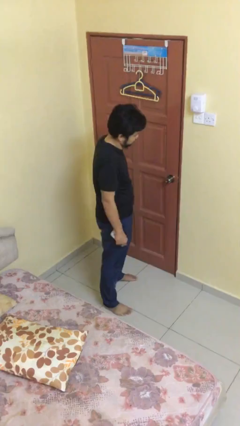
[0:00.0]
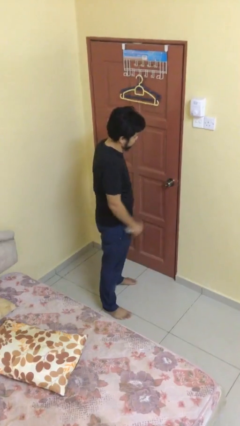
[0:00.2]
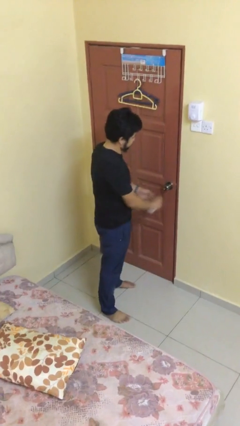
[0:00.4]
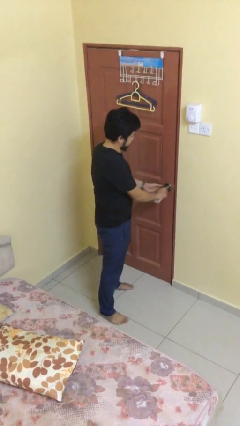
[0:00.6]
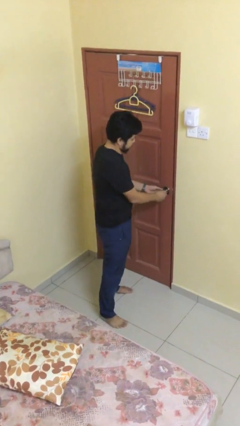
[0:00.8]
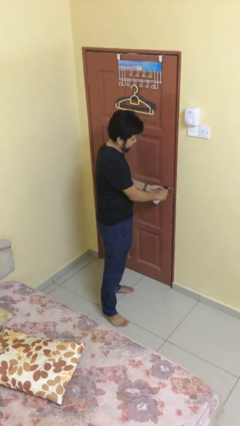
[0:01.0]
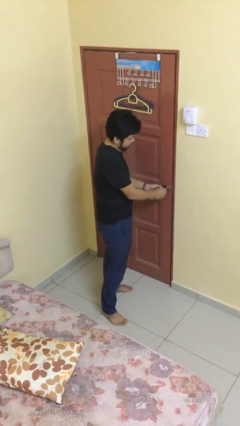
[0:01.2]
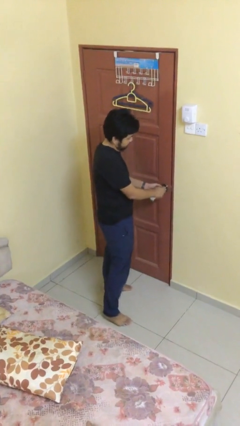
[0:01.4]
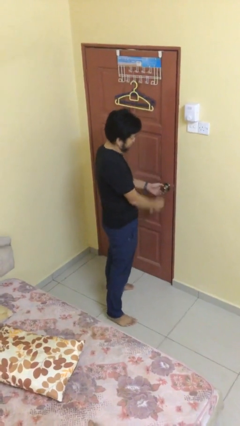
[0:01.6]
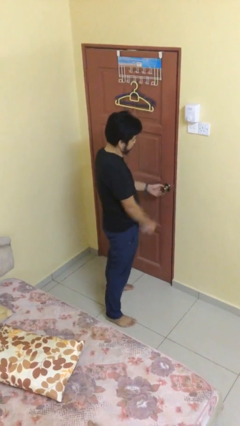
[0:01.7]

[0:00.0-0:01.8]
person unlocks door with keys

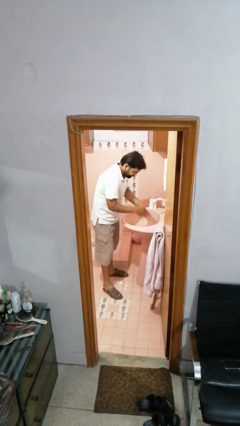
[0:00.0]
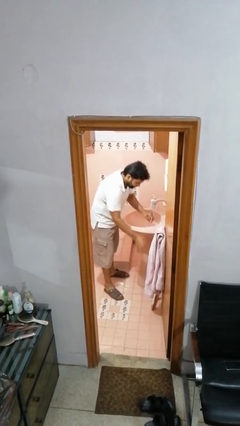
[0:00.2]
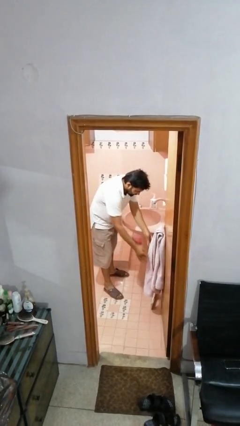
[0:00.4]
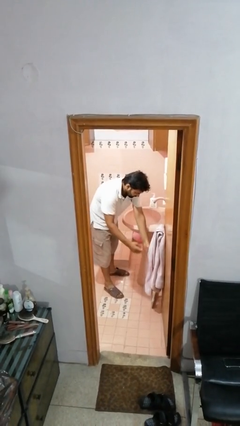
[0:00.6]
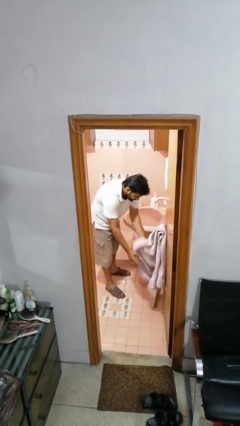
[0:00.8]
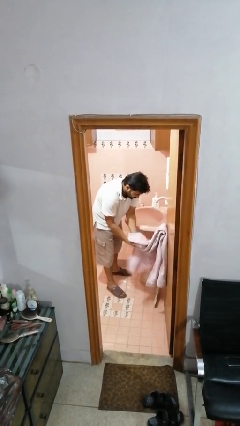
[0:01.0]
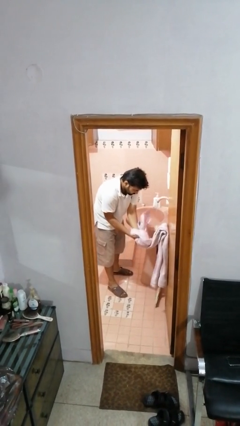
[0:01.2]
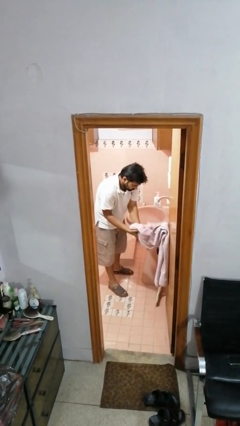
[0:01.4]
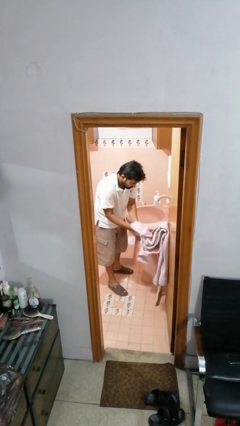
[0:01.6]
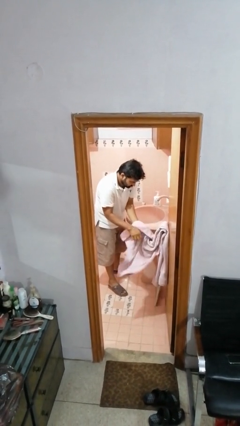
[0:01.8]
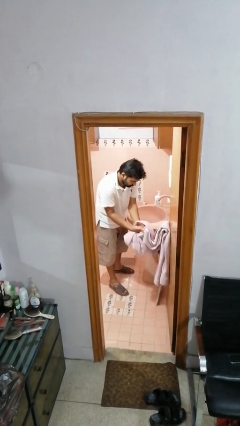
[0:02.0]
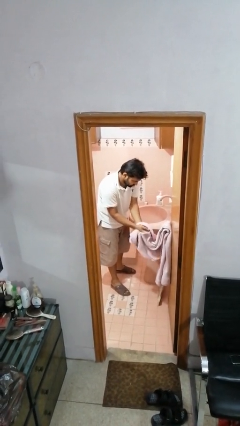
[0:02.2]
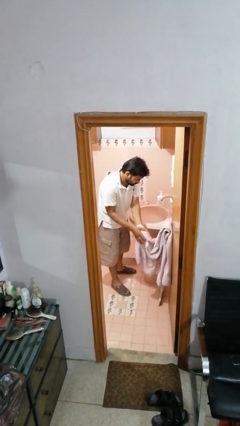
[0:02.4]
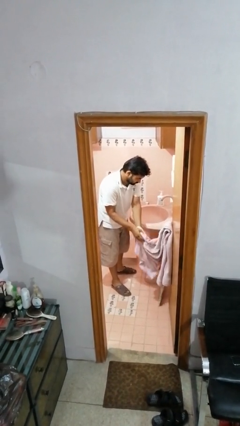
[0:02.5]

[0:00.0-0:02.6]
person dries hands with towel

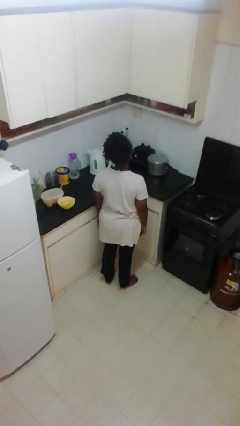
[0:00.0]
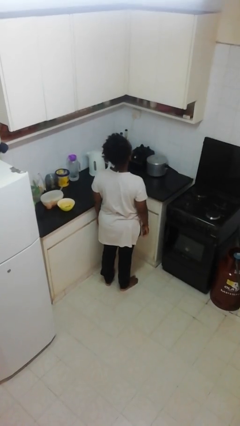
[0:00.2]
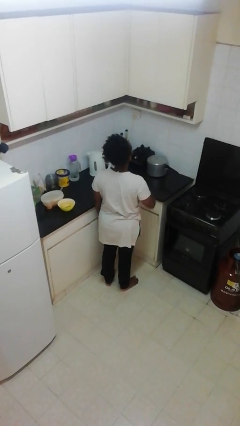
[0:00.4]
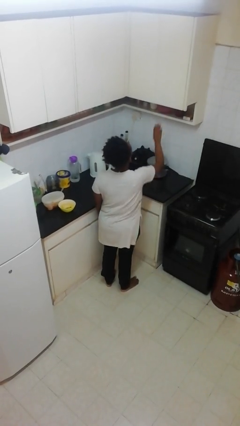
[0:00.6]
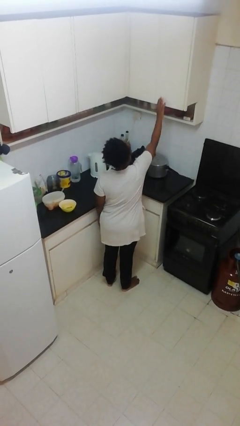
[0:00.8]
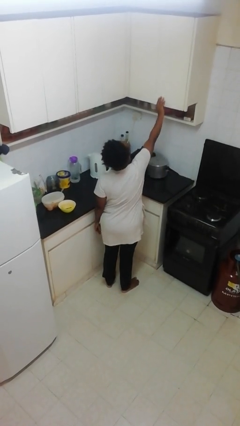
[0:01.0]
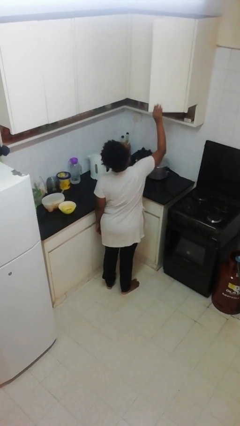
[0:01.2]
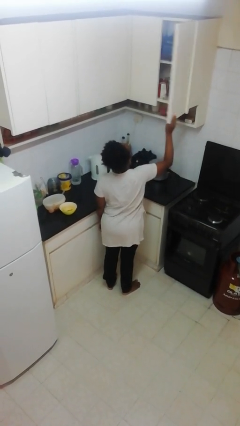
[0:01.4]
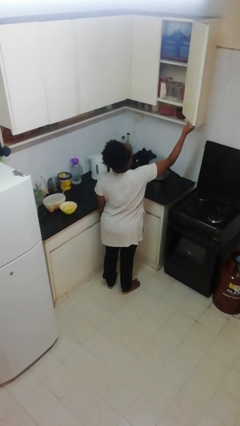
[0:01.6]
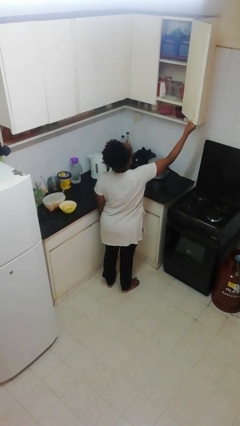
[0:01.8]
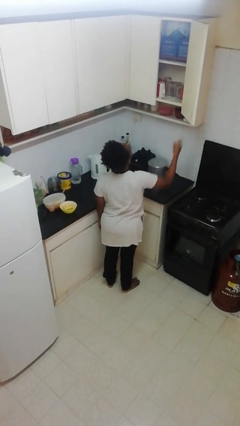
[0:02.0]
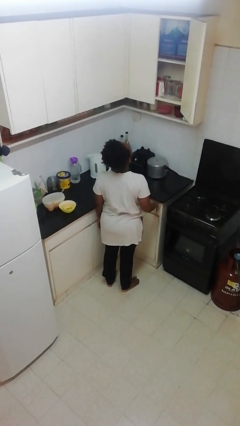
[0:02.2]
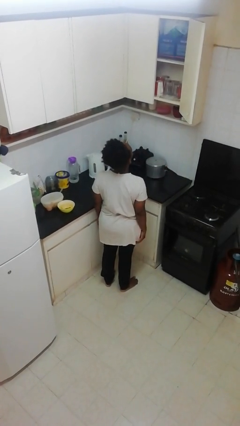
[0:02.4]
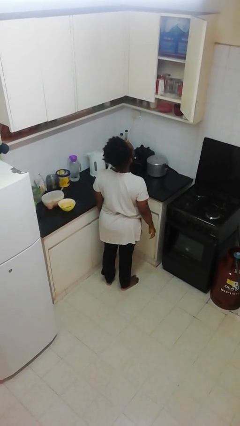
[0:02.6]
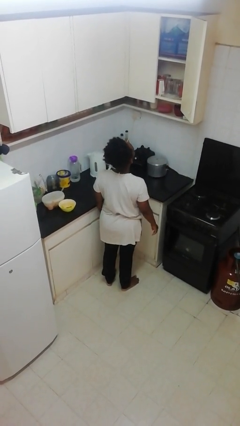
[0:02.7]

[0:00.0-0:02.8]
person opens cabinet

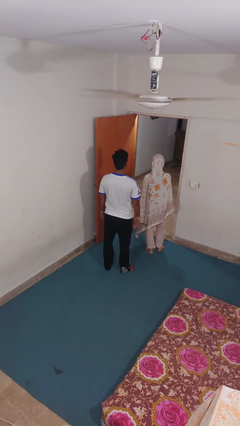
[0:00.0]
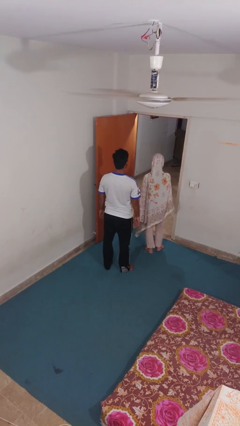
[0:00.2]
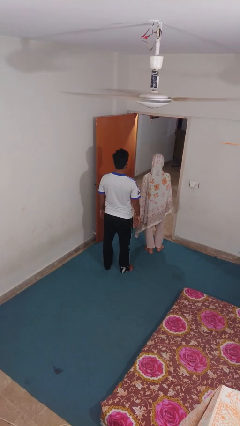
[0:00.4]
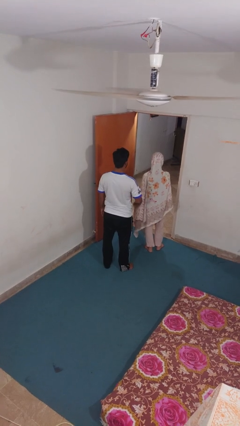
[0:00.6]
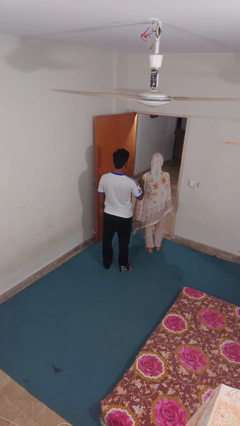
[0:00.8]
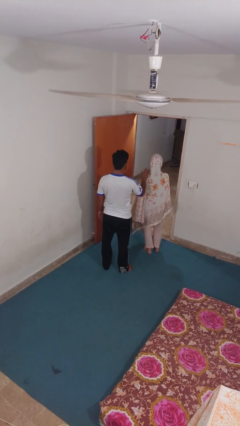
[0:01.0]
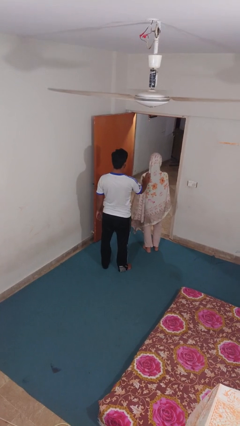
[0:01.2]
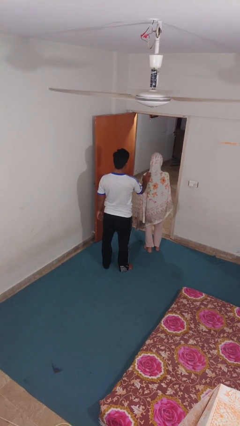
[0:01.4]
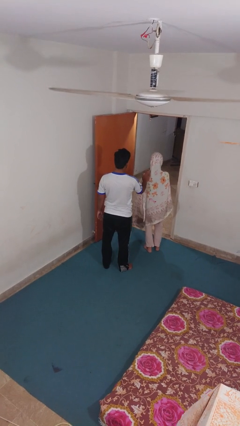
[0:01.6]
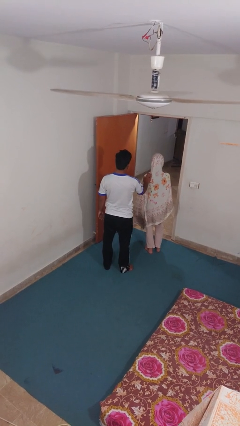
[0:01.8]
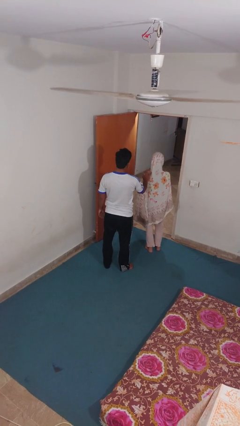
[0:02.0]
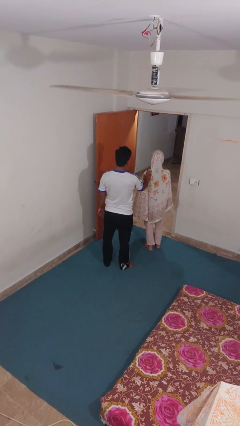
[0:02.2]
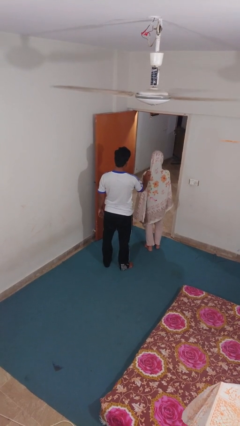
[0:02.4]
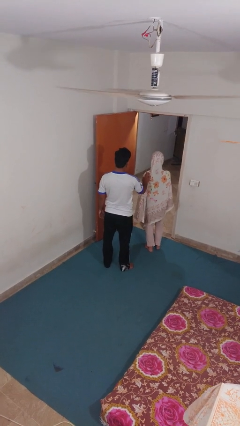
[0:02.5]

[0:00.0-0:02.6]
person touches back of person

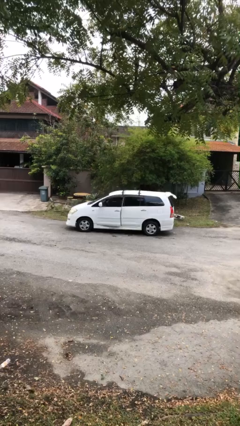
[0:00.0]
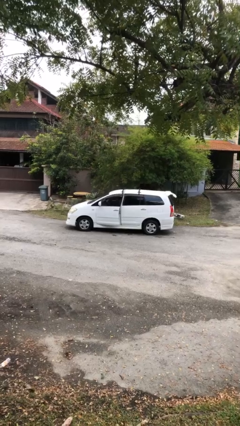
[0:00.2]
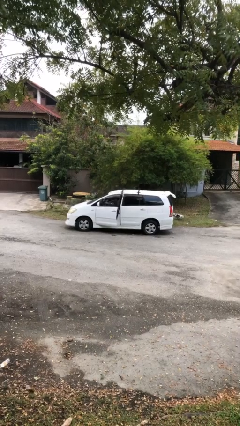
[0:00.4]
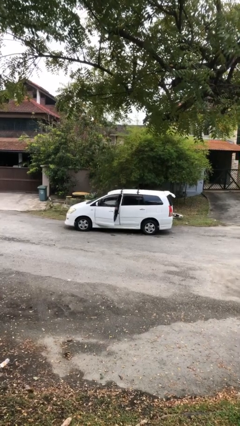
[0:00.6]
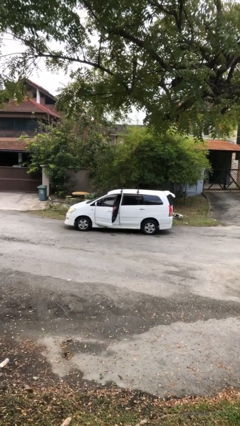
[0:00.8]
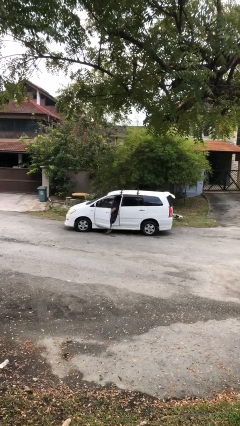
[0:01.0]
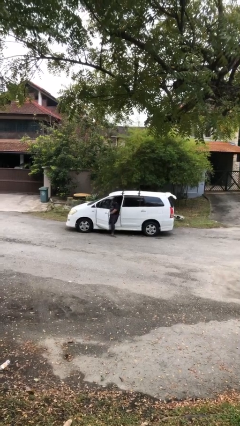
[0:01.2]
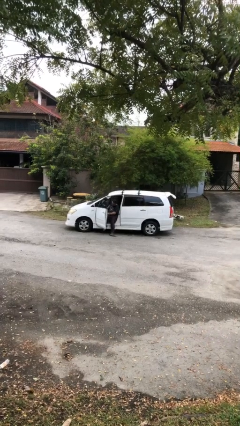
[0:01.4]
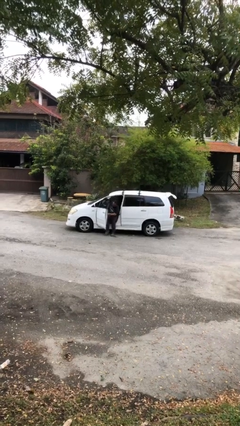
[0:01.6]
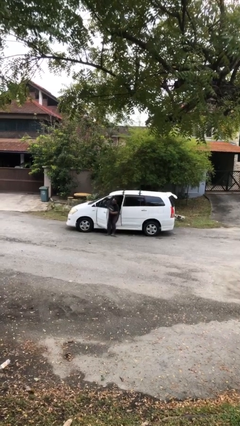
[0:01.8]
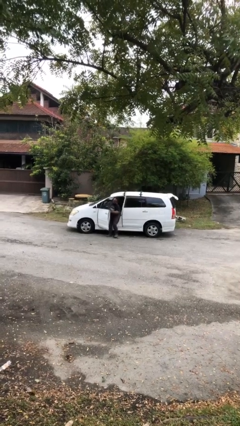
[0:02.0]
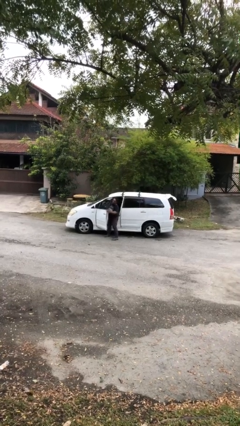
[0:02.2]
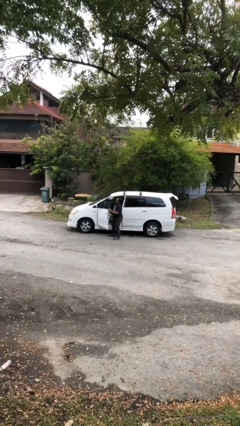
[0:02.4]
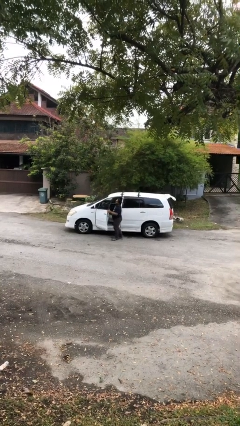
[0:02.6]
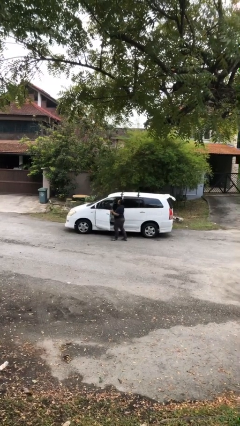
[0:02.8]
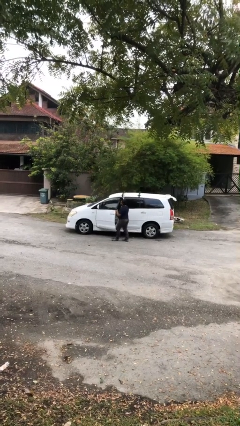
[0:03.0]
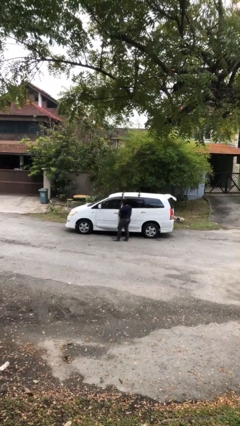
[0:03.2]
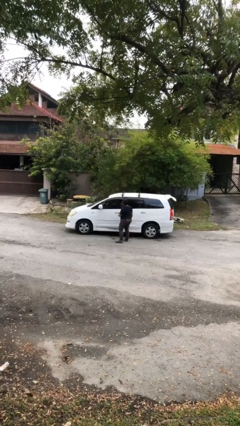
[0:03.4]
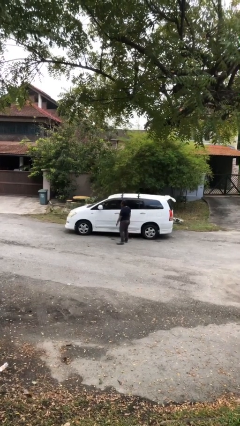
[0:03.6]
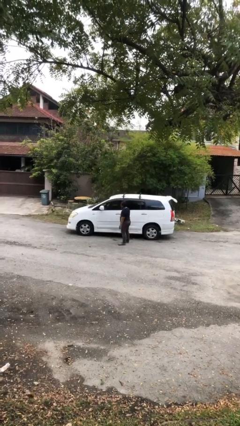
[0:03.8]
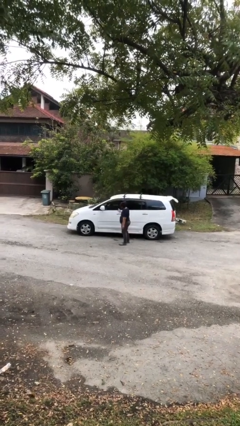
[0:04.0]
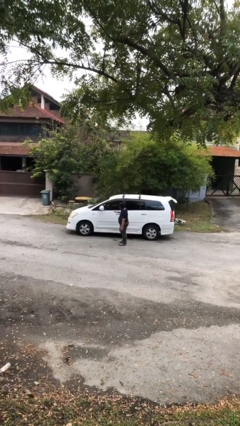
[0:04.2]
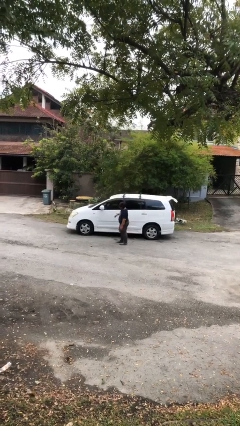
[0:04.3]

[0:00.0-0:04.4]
car drops off person

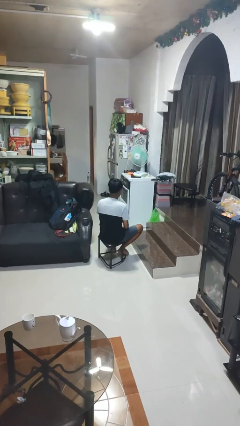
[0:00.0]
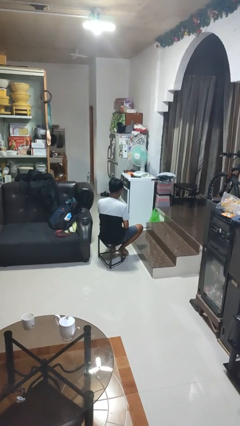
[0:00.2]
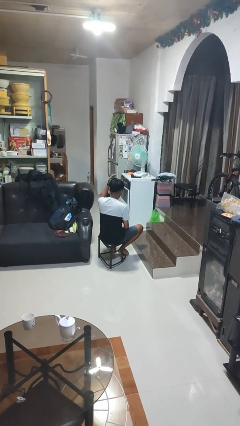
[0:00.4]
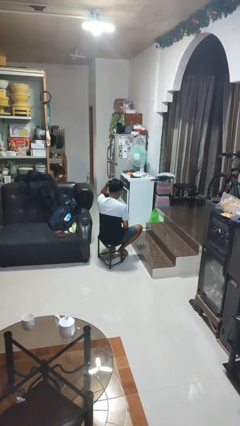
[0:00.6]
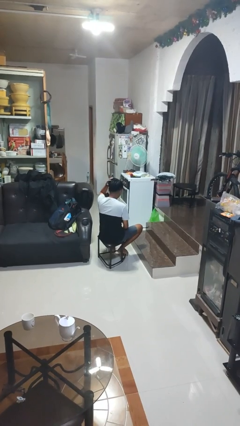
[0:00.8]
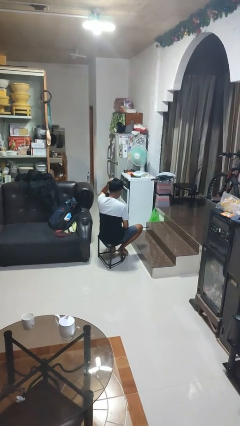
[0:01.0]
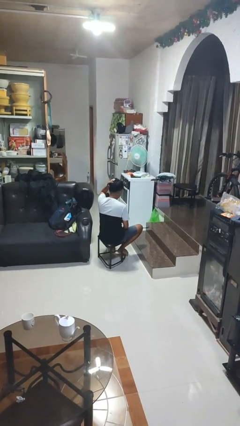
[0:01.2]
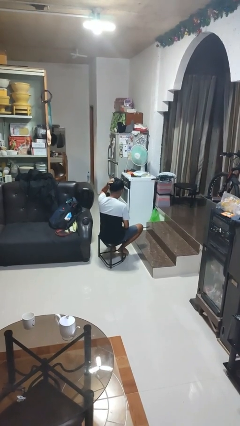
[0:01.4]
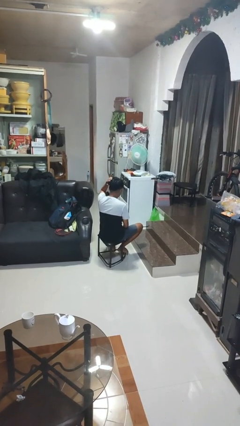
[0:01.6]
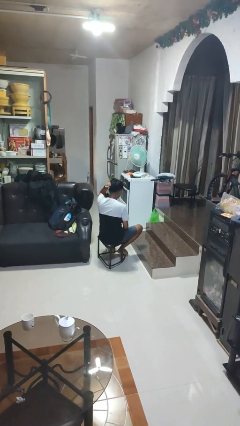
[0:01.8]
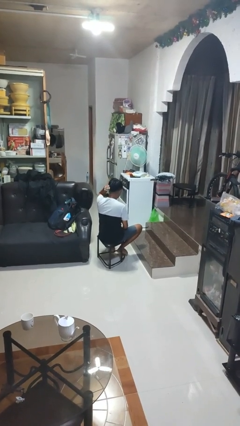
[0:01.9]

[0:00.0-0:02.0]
person pats head

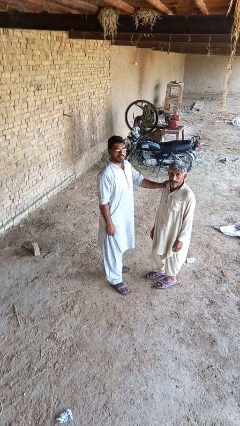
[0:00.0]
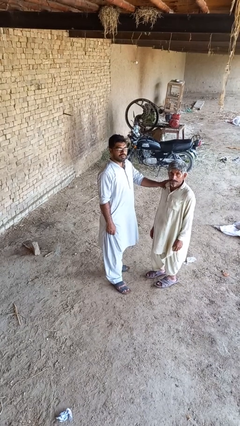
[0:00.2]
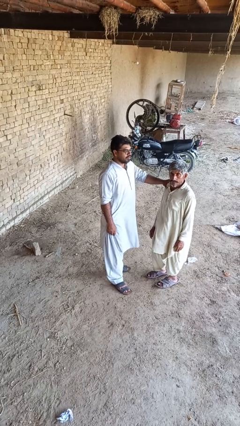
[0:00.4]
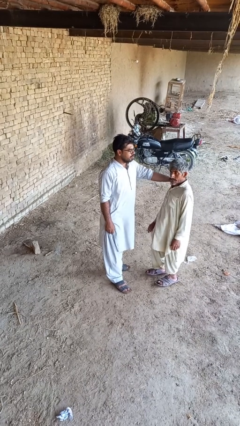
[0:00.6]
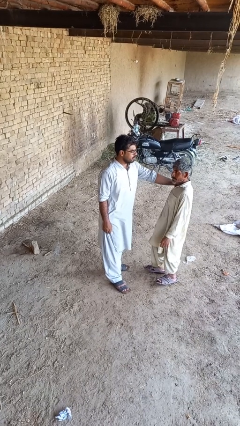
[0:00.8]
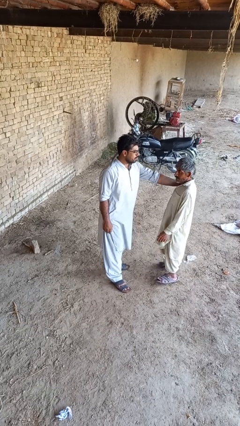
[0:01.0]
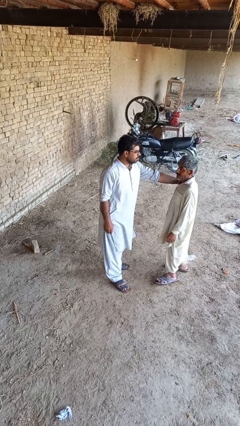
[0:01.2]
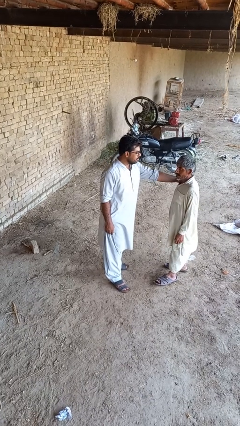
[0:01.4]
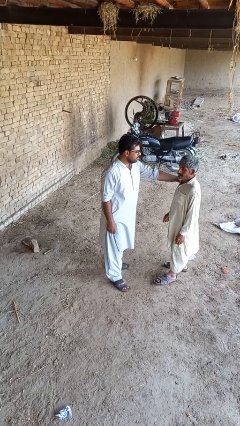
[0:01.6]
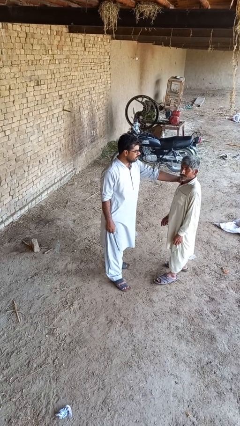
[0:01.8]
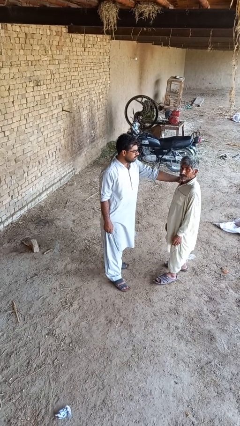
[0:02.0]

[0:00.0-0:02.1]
person spins person around
